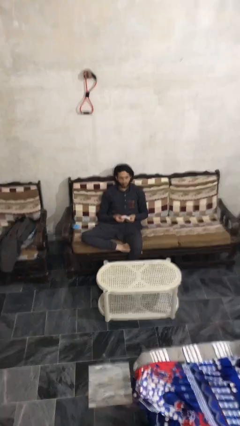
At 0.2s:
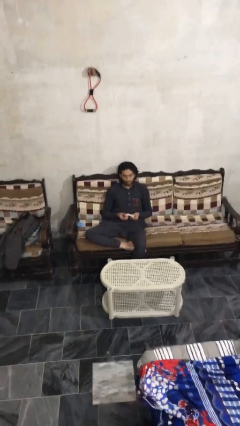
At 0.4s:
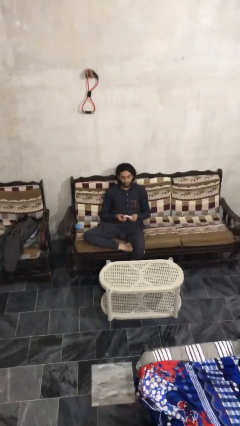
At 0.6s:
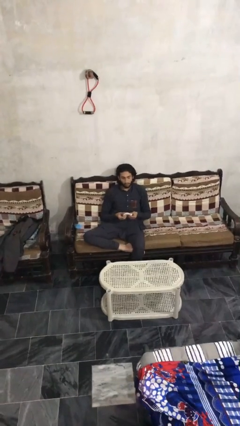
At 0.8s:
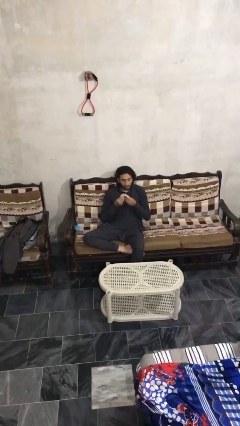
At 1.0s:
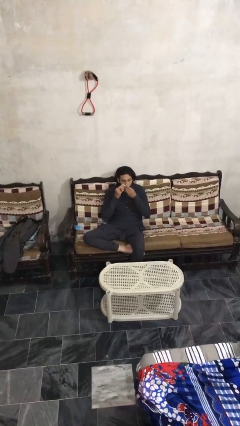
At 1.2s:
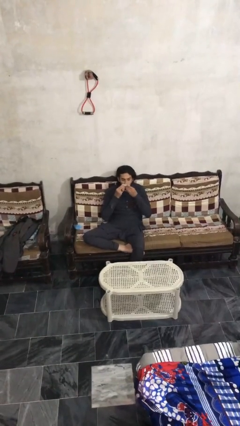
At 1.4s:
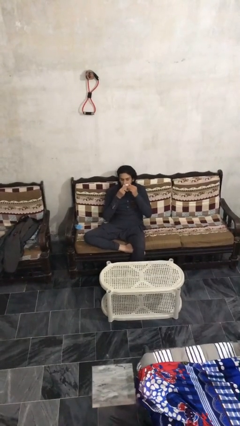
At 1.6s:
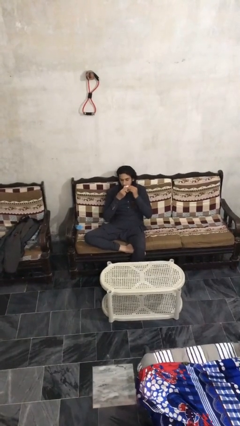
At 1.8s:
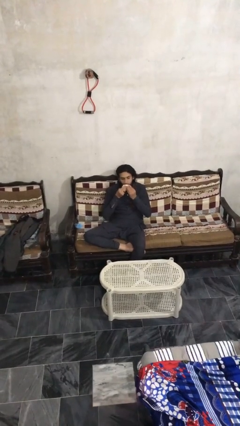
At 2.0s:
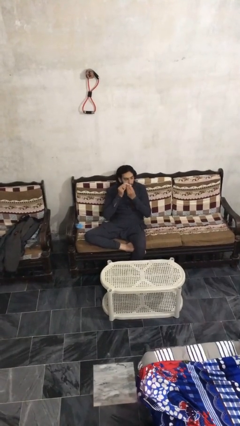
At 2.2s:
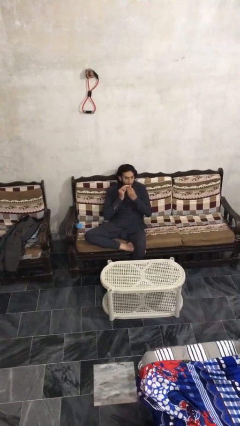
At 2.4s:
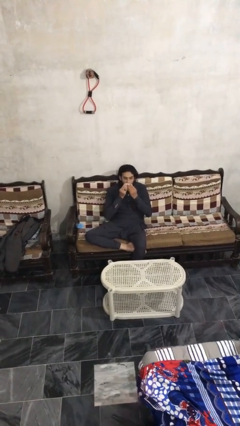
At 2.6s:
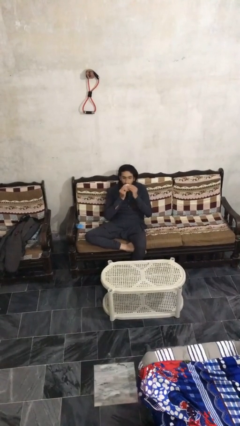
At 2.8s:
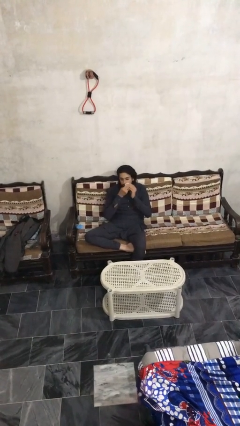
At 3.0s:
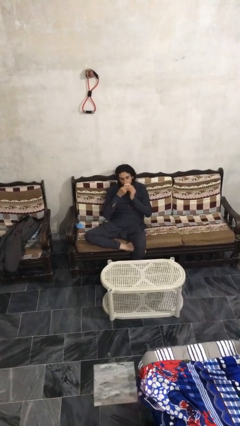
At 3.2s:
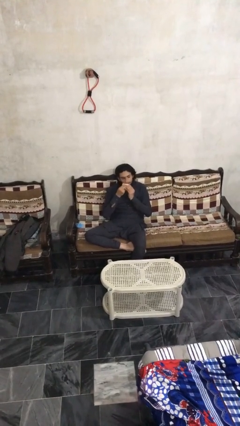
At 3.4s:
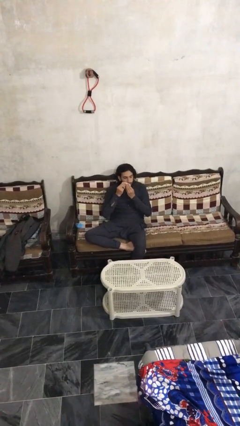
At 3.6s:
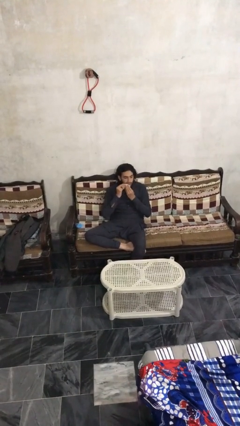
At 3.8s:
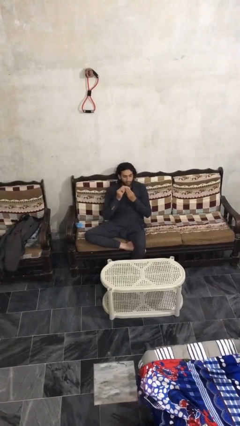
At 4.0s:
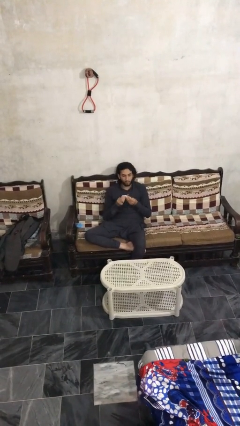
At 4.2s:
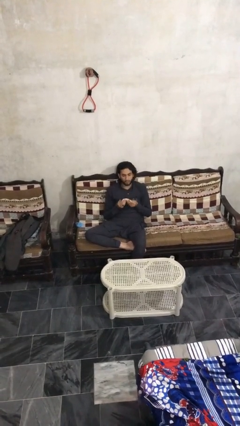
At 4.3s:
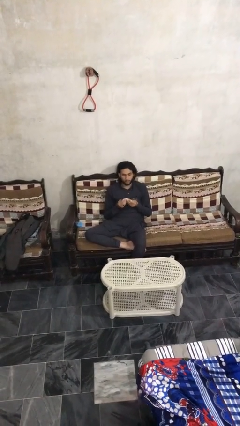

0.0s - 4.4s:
person wipes mouth with napkin

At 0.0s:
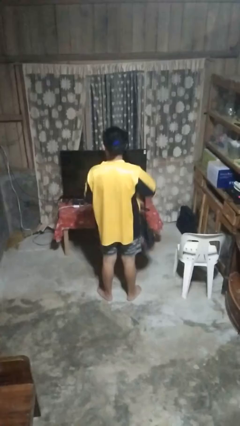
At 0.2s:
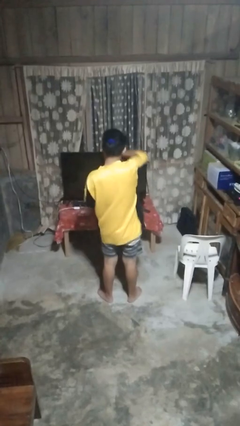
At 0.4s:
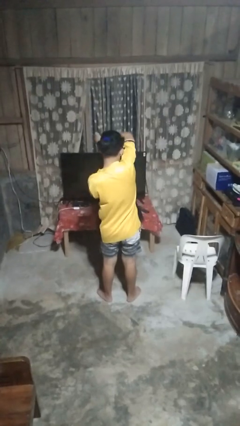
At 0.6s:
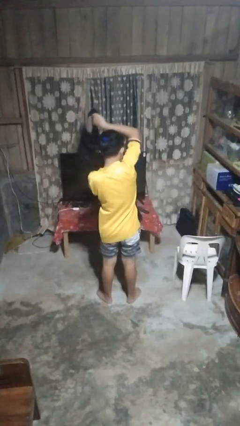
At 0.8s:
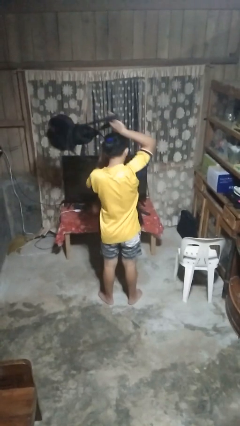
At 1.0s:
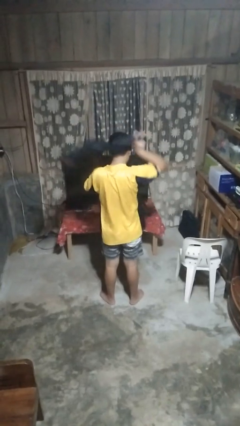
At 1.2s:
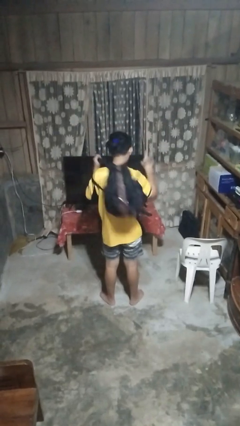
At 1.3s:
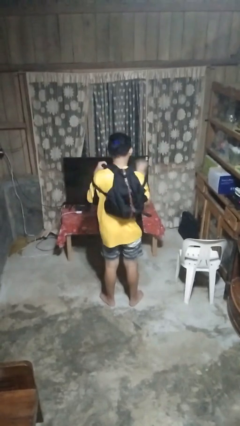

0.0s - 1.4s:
person puts on backpack

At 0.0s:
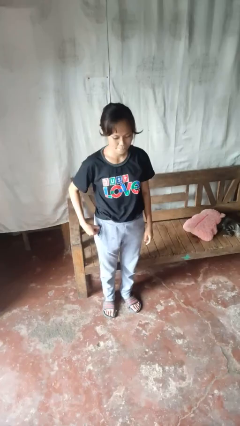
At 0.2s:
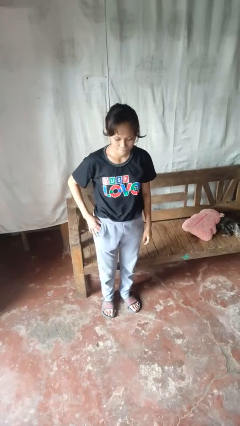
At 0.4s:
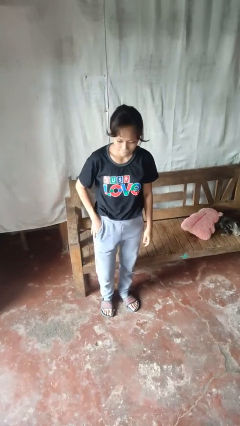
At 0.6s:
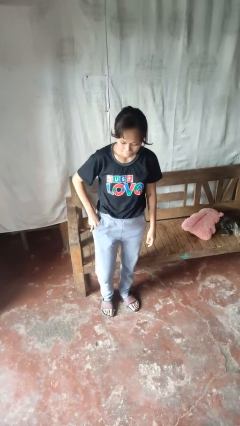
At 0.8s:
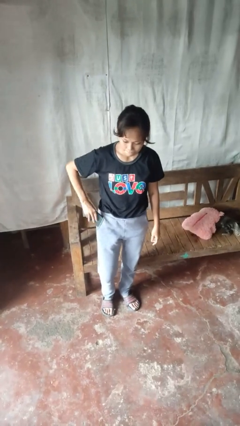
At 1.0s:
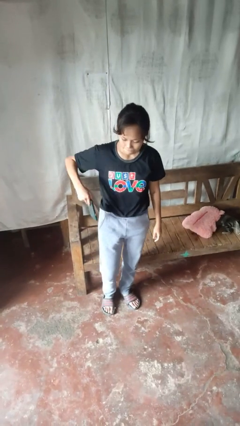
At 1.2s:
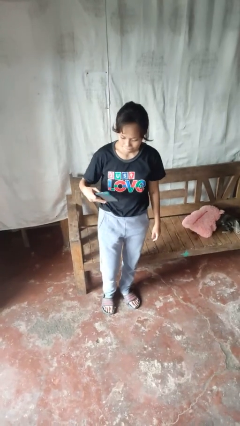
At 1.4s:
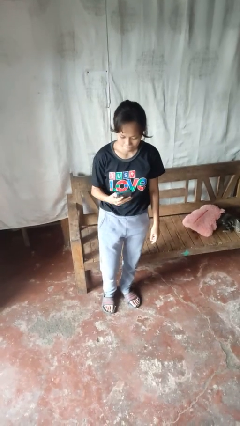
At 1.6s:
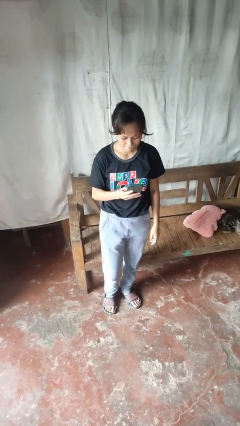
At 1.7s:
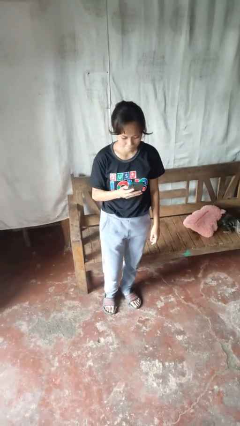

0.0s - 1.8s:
person takes phone from pocket

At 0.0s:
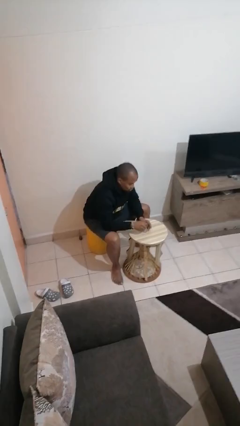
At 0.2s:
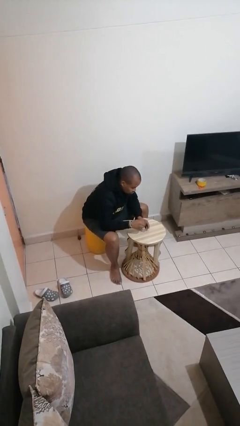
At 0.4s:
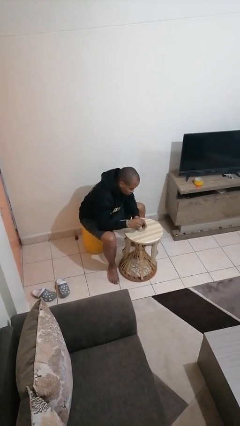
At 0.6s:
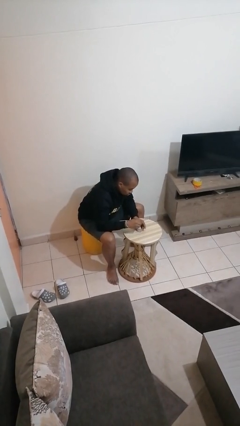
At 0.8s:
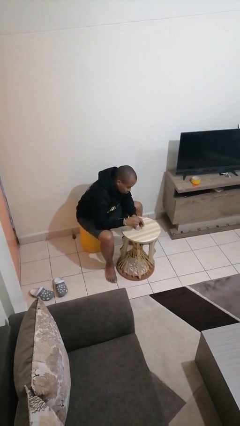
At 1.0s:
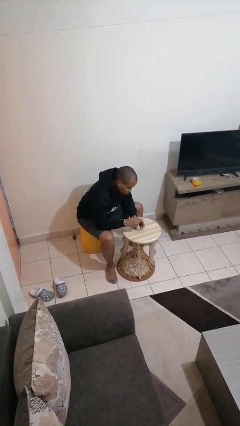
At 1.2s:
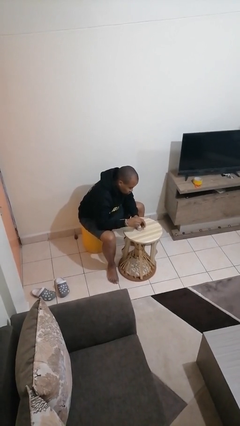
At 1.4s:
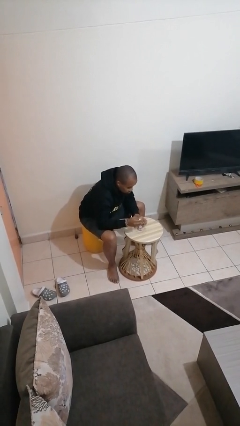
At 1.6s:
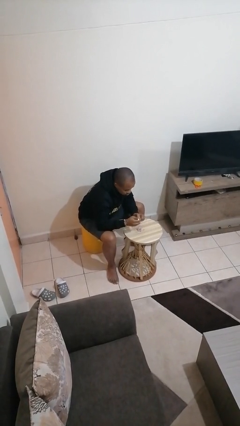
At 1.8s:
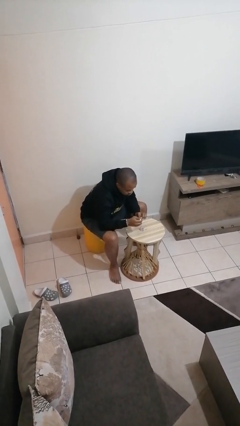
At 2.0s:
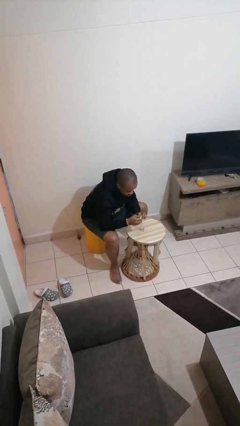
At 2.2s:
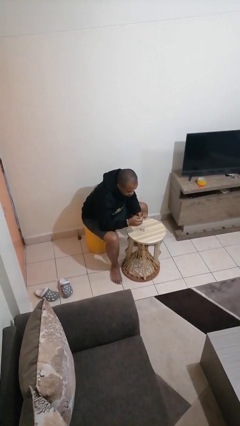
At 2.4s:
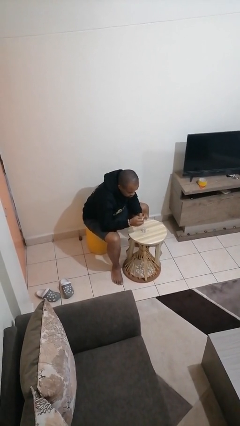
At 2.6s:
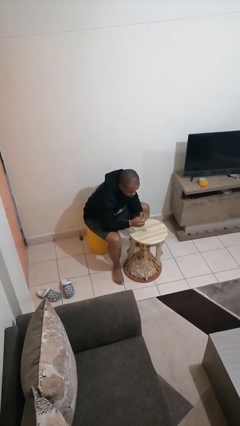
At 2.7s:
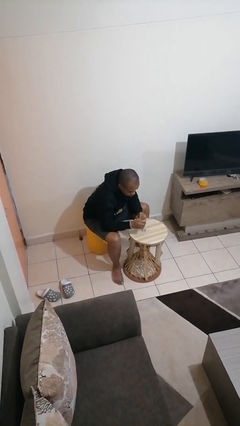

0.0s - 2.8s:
person paints fingernails

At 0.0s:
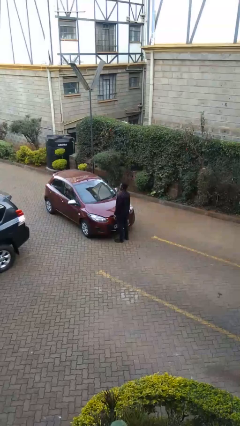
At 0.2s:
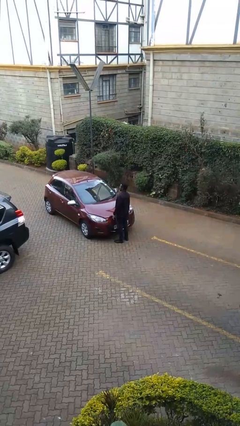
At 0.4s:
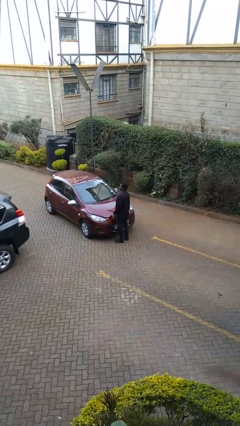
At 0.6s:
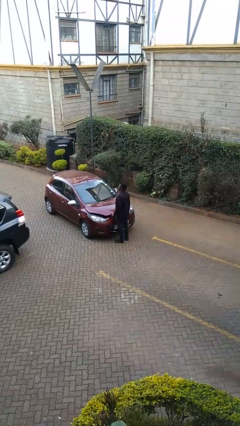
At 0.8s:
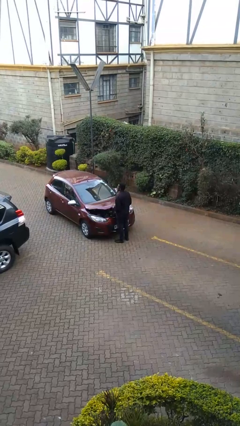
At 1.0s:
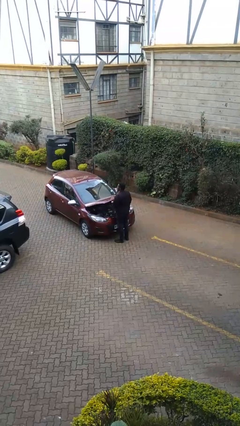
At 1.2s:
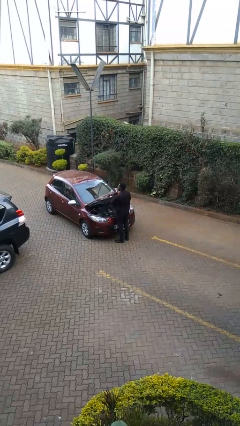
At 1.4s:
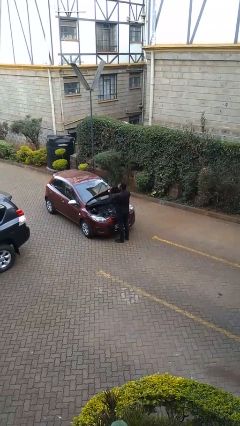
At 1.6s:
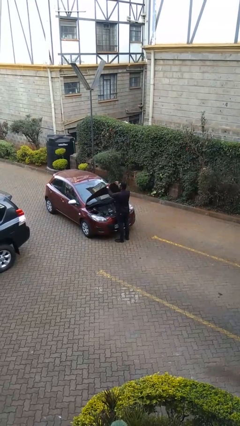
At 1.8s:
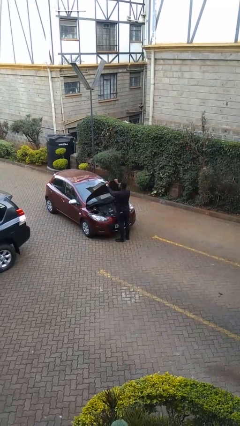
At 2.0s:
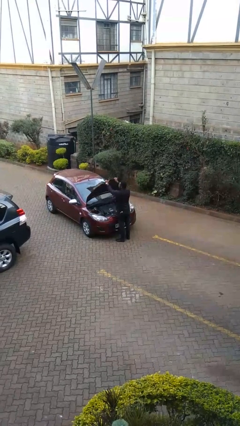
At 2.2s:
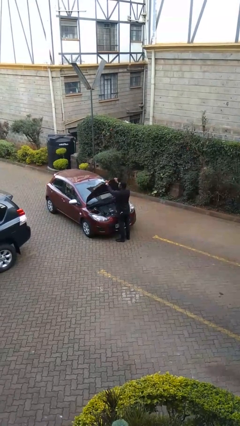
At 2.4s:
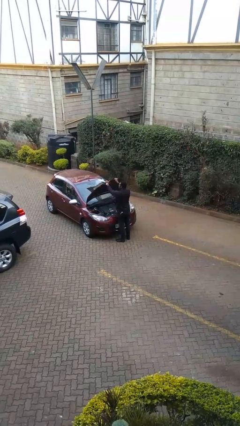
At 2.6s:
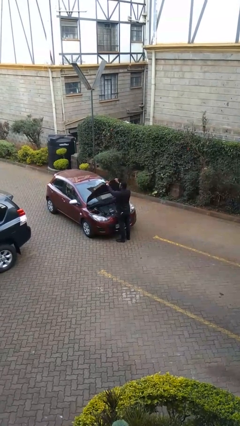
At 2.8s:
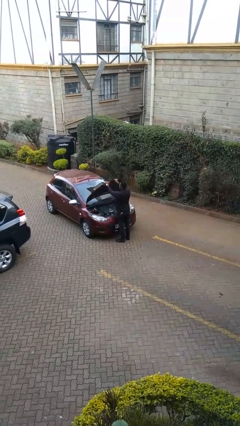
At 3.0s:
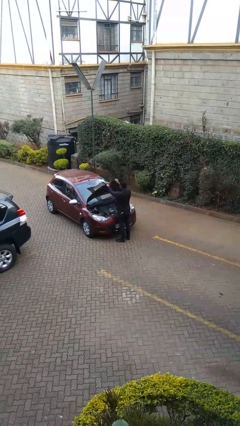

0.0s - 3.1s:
person opens car hood

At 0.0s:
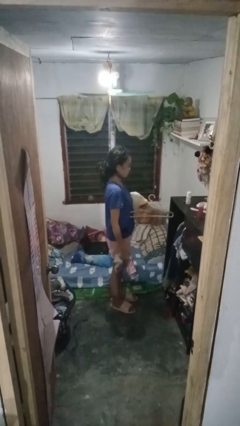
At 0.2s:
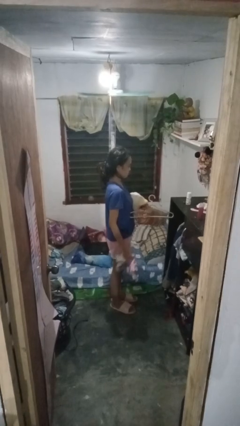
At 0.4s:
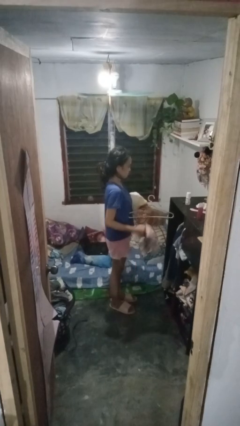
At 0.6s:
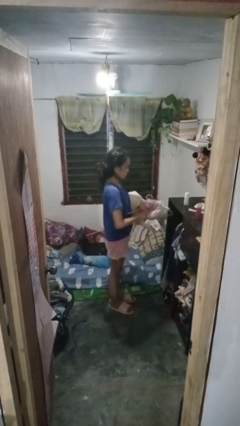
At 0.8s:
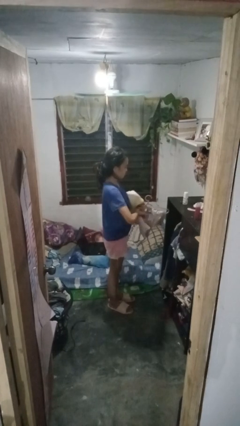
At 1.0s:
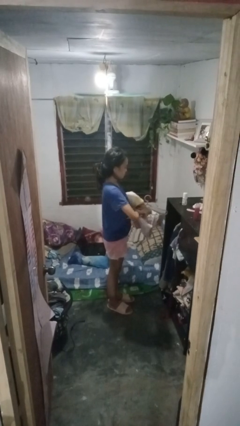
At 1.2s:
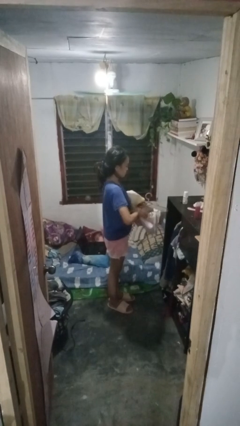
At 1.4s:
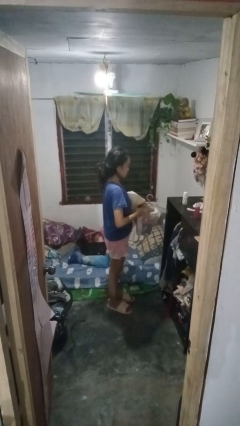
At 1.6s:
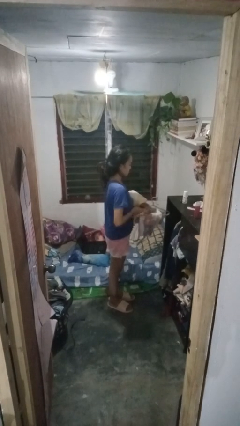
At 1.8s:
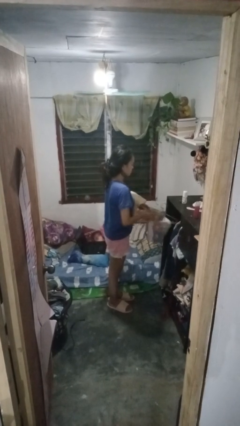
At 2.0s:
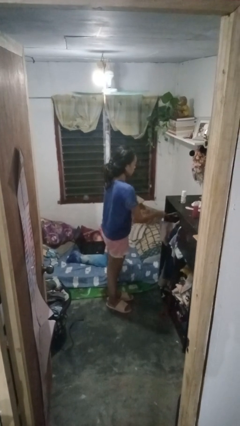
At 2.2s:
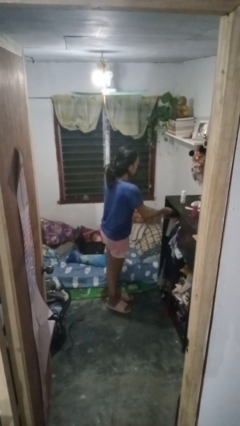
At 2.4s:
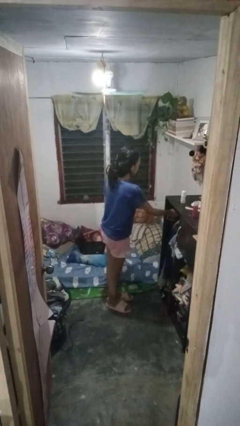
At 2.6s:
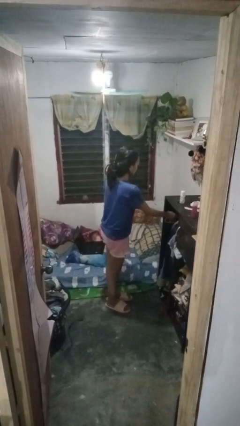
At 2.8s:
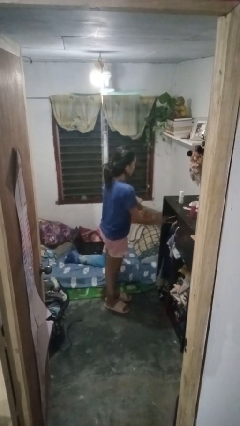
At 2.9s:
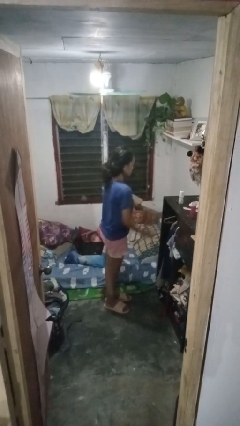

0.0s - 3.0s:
person puts clothes into closet

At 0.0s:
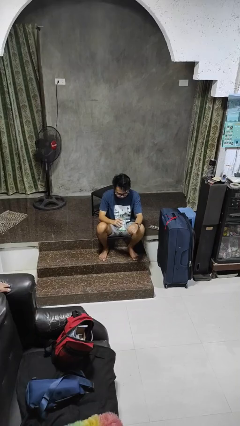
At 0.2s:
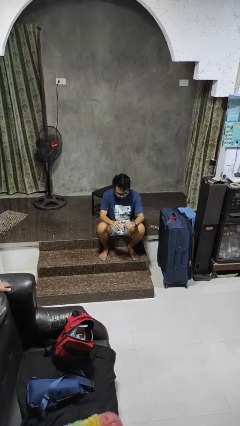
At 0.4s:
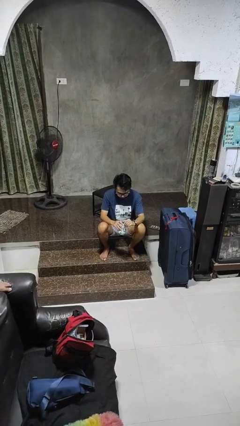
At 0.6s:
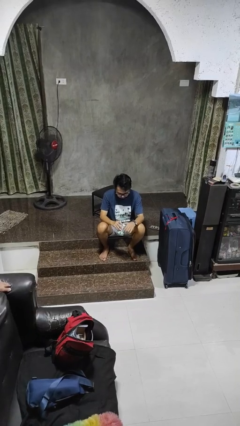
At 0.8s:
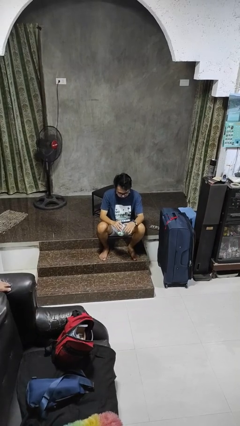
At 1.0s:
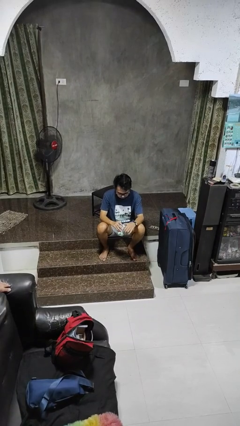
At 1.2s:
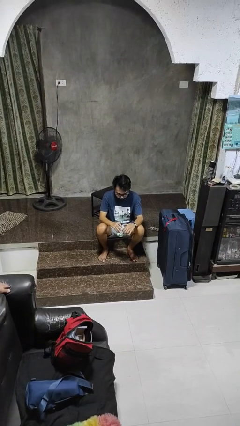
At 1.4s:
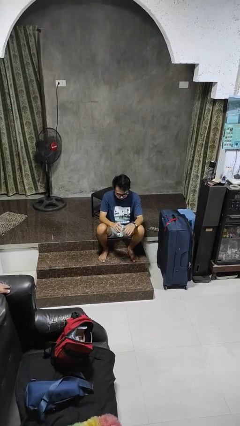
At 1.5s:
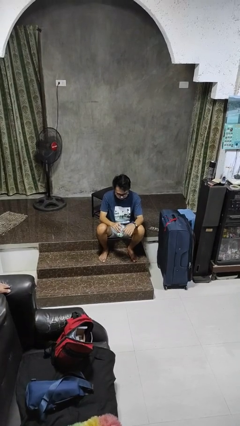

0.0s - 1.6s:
person opens beverage can
